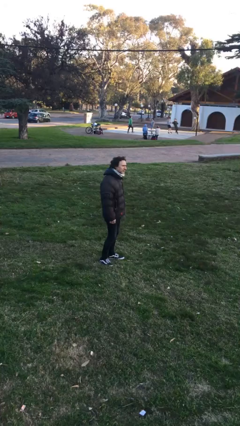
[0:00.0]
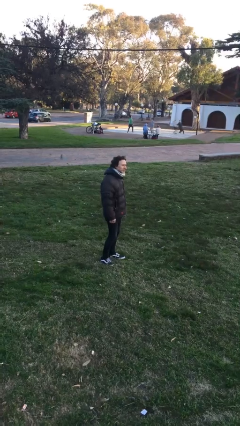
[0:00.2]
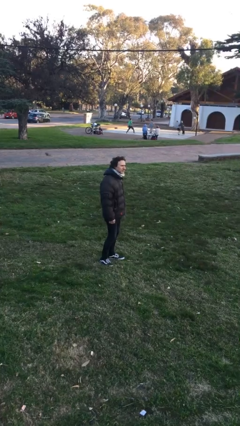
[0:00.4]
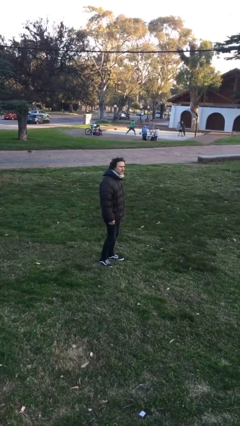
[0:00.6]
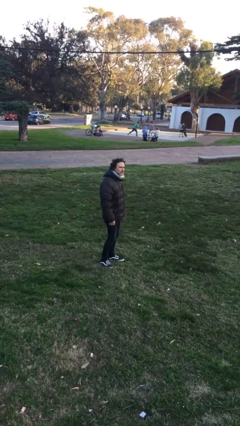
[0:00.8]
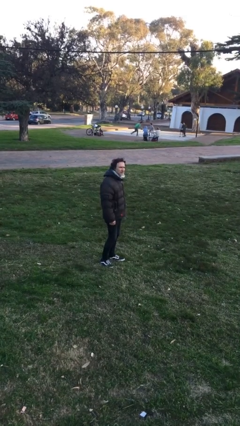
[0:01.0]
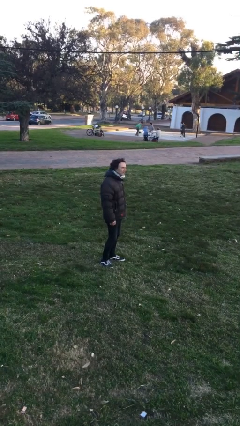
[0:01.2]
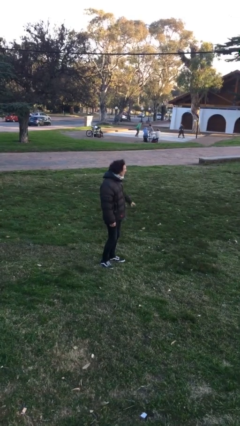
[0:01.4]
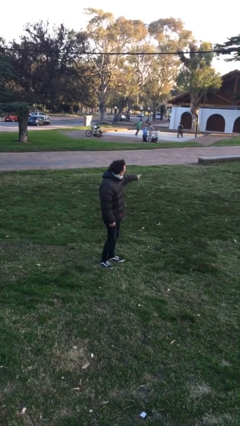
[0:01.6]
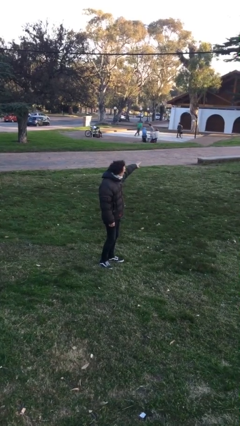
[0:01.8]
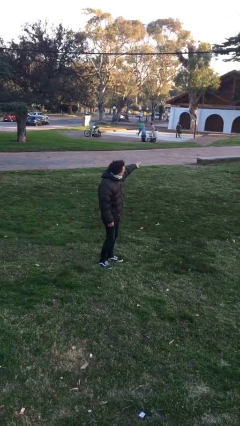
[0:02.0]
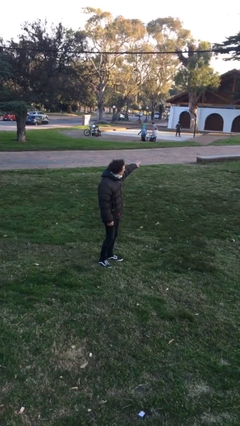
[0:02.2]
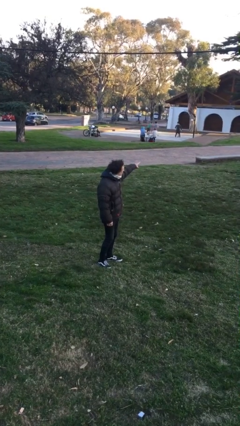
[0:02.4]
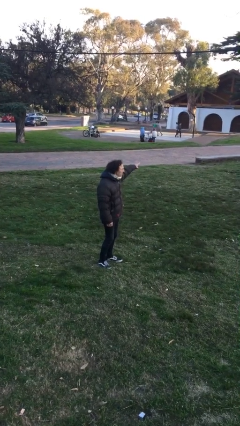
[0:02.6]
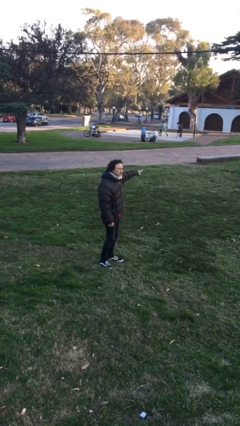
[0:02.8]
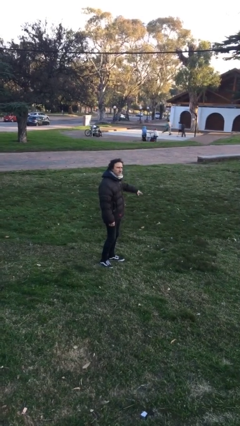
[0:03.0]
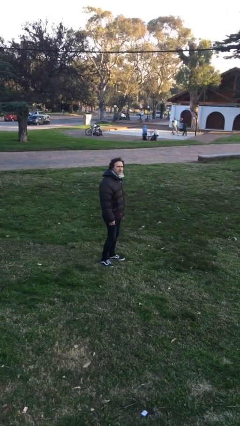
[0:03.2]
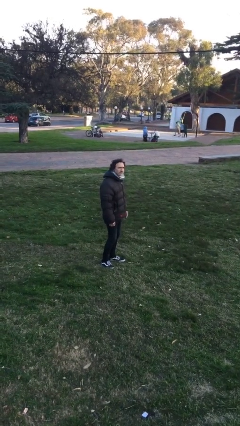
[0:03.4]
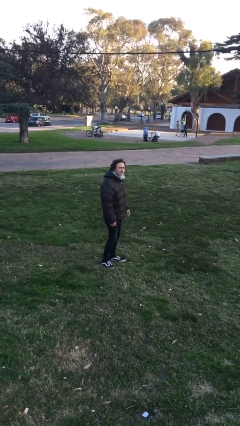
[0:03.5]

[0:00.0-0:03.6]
person points at person

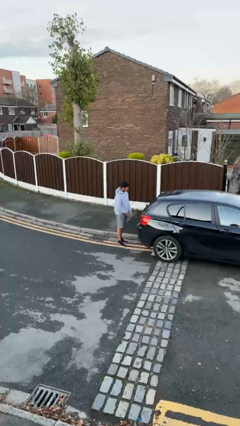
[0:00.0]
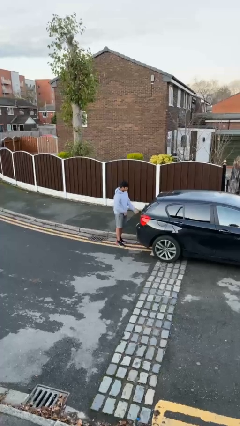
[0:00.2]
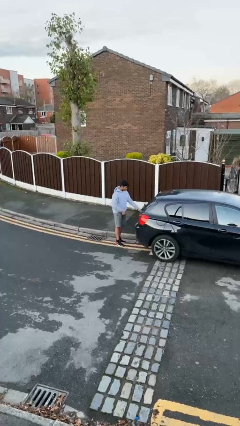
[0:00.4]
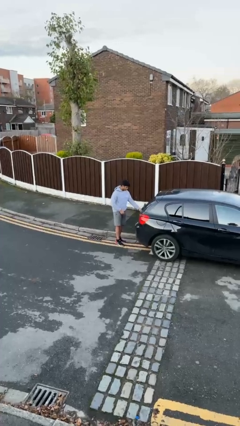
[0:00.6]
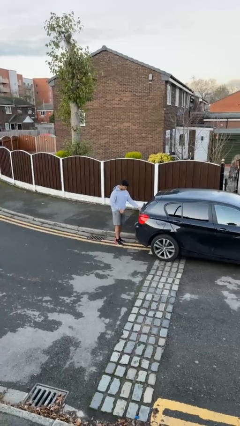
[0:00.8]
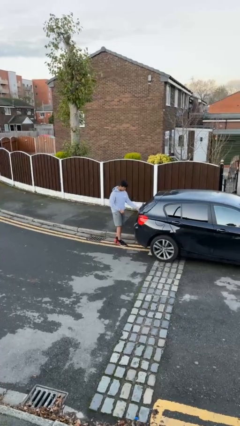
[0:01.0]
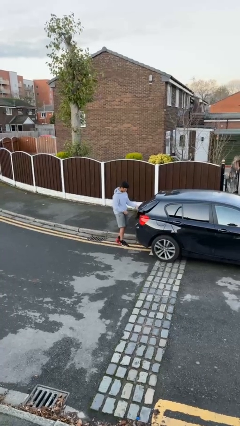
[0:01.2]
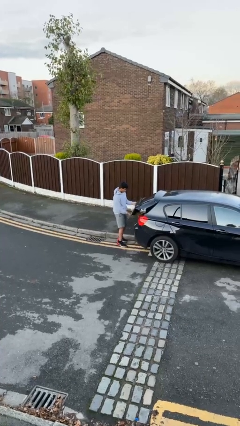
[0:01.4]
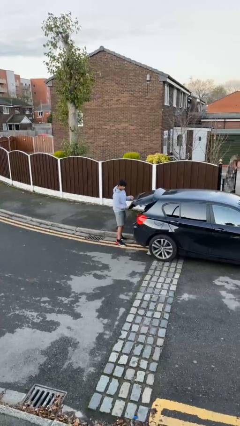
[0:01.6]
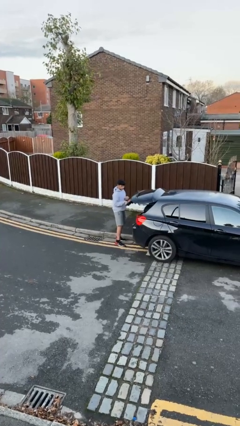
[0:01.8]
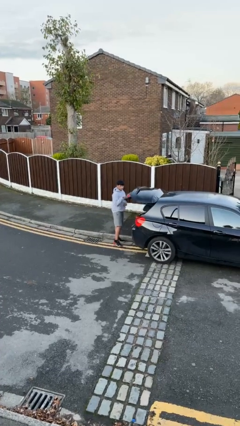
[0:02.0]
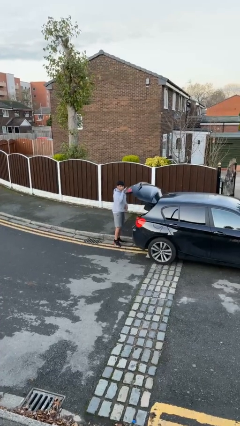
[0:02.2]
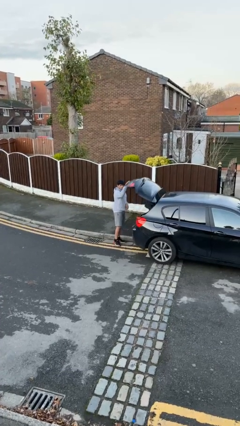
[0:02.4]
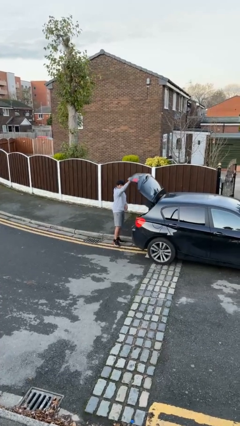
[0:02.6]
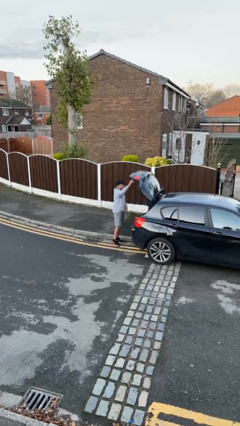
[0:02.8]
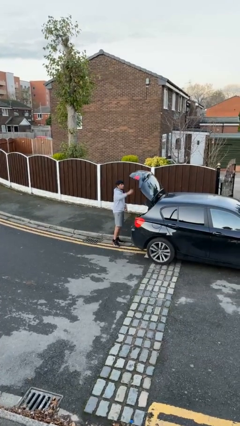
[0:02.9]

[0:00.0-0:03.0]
person opens car trunk

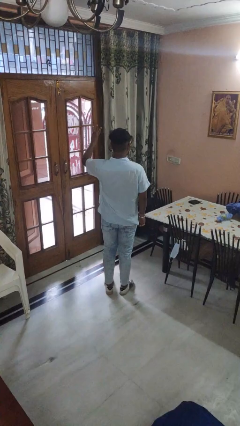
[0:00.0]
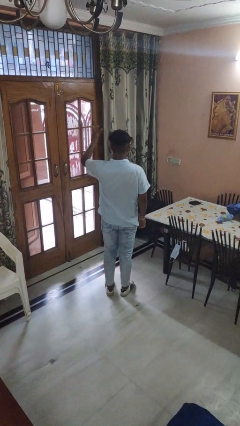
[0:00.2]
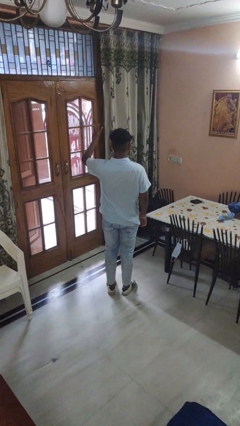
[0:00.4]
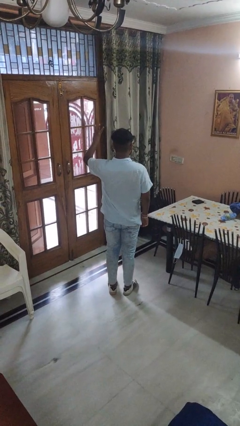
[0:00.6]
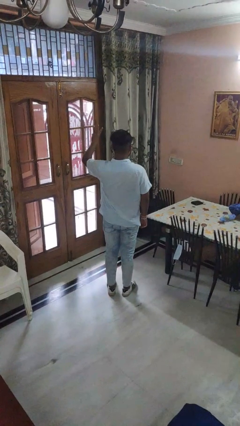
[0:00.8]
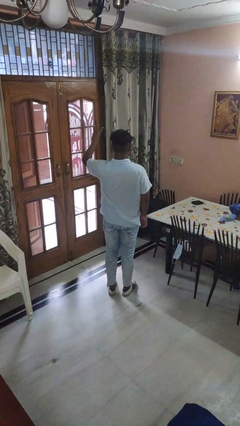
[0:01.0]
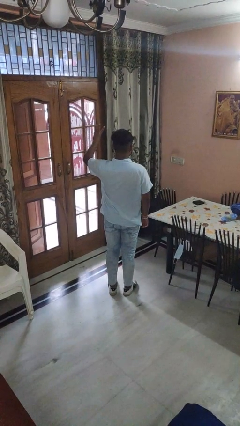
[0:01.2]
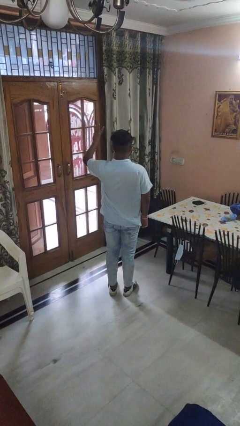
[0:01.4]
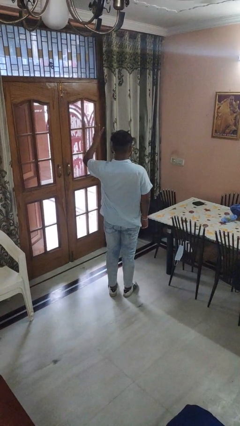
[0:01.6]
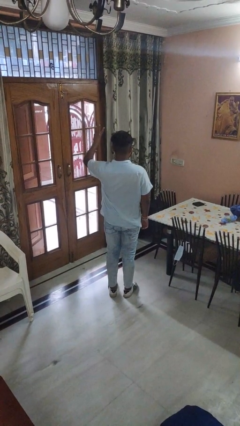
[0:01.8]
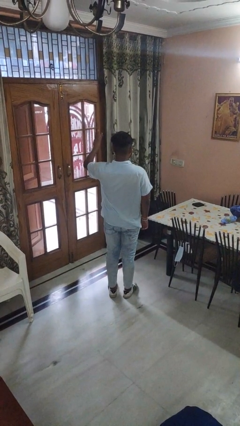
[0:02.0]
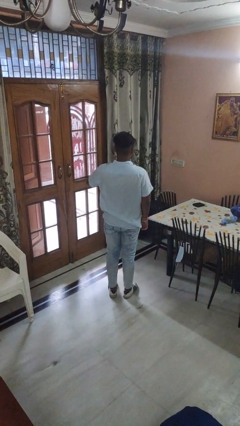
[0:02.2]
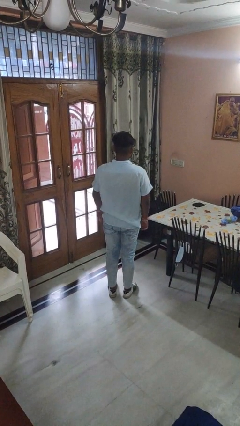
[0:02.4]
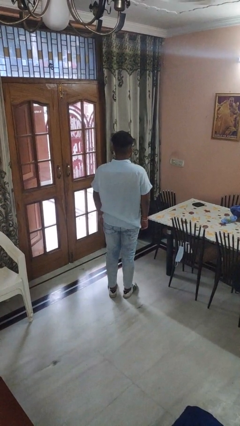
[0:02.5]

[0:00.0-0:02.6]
person gestures number three

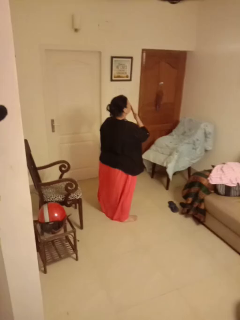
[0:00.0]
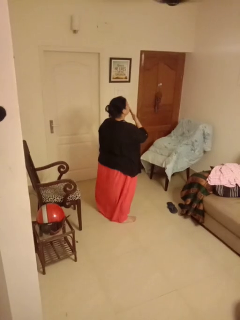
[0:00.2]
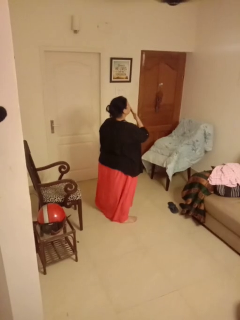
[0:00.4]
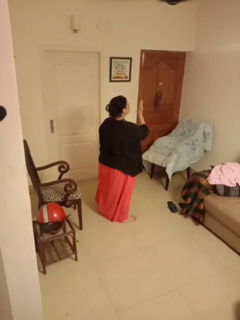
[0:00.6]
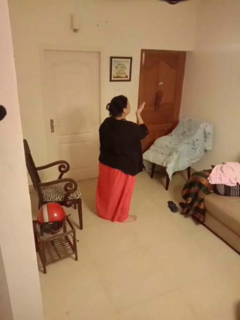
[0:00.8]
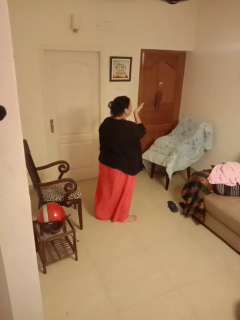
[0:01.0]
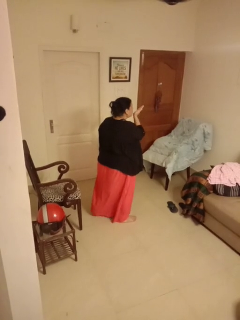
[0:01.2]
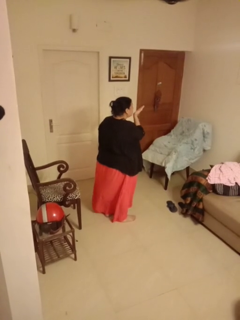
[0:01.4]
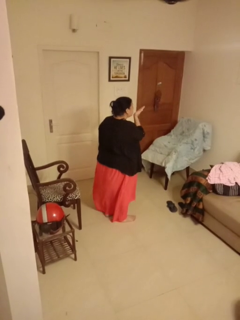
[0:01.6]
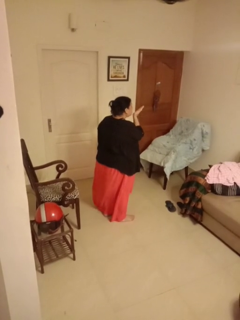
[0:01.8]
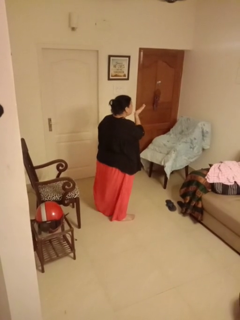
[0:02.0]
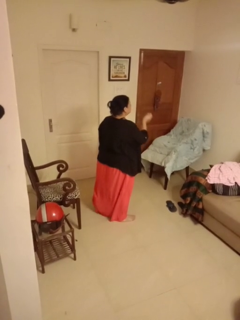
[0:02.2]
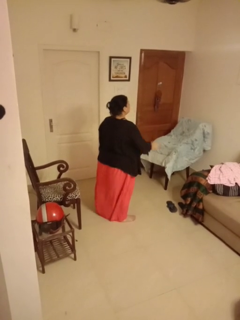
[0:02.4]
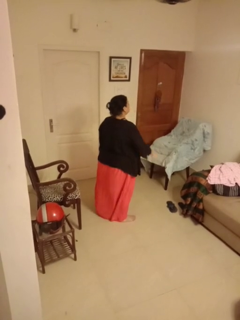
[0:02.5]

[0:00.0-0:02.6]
person gestures blow kiss

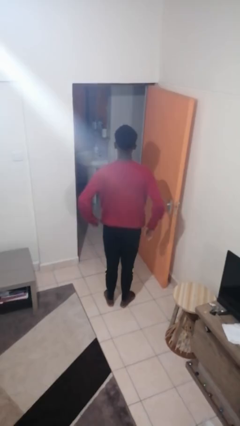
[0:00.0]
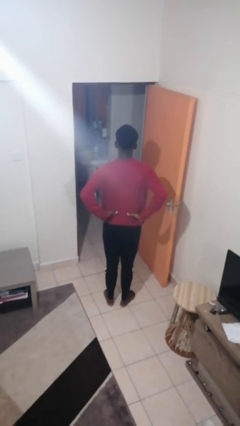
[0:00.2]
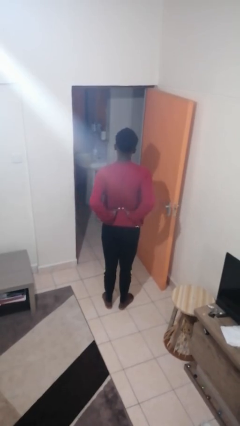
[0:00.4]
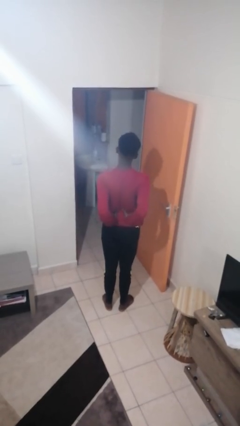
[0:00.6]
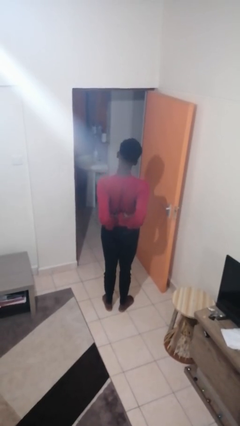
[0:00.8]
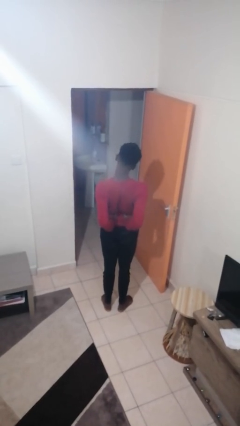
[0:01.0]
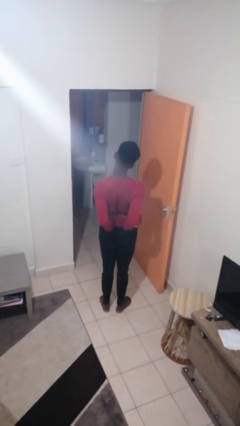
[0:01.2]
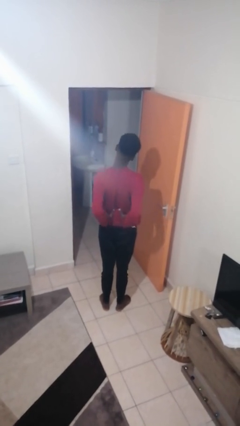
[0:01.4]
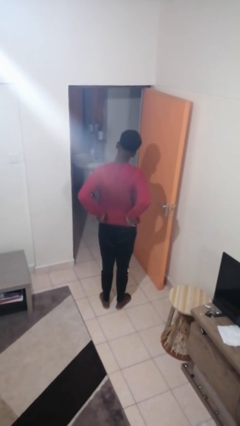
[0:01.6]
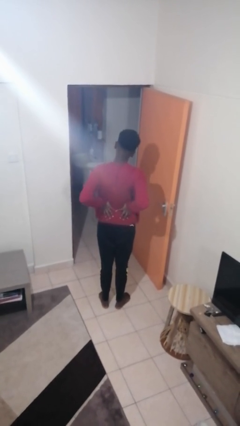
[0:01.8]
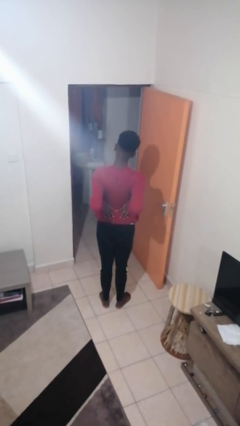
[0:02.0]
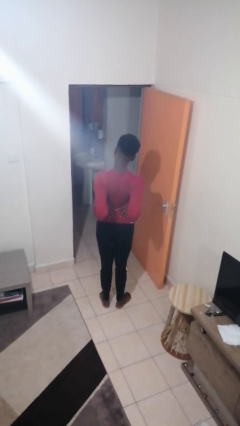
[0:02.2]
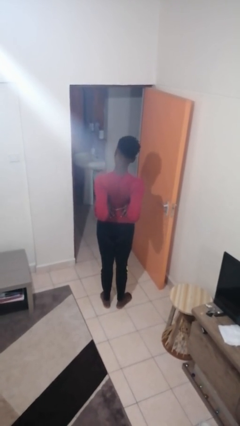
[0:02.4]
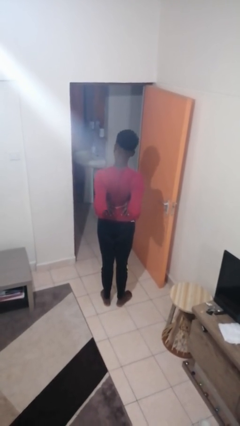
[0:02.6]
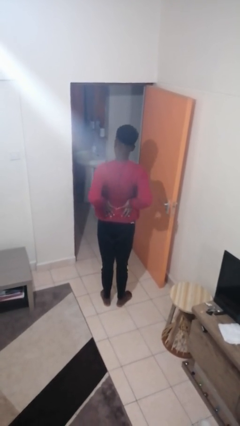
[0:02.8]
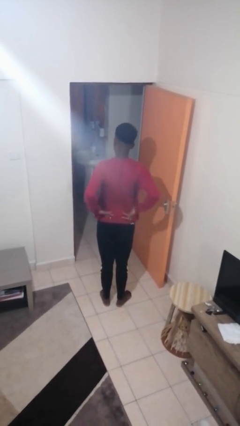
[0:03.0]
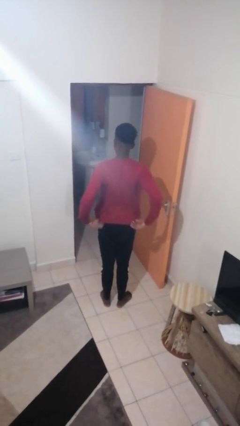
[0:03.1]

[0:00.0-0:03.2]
person stretches back

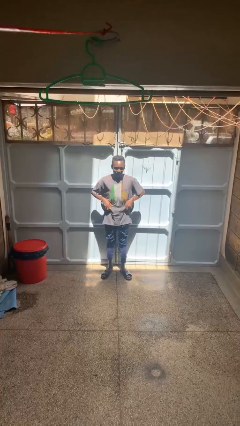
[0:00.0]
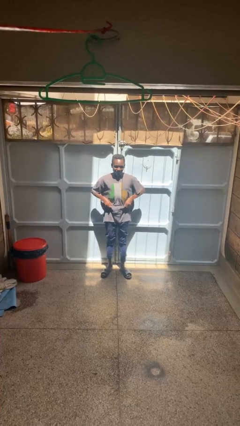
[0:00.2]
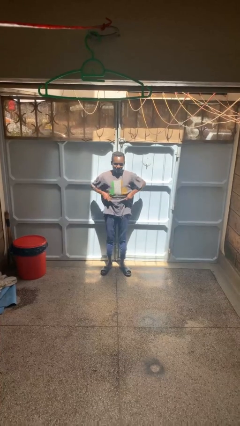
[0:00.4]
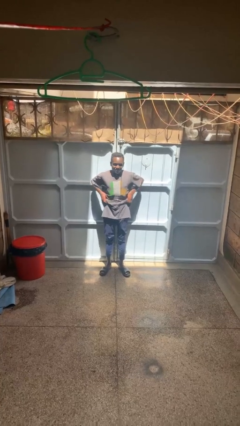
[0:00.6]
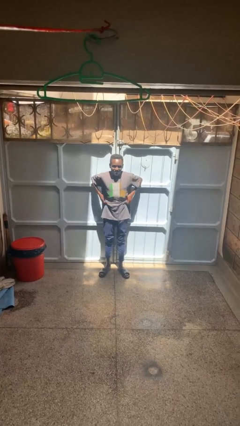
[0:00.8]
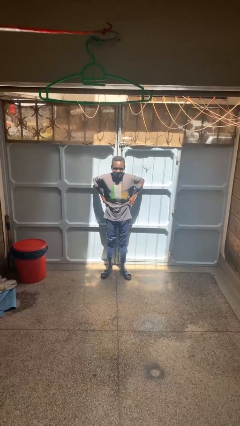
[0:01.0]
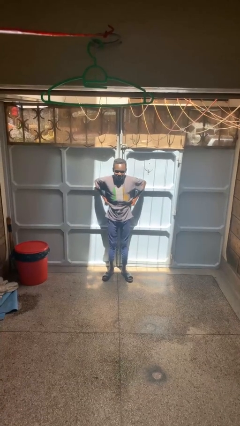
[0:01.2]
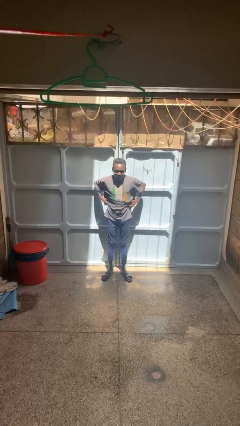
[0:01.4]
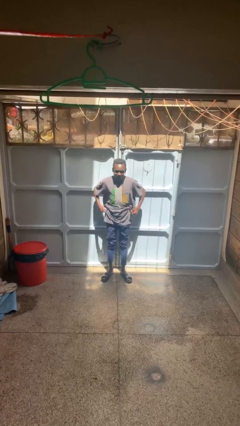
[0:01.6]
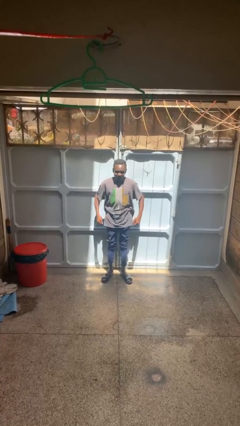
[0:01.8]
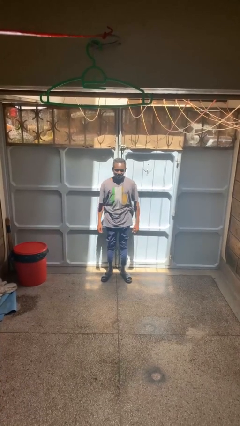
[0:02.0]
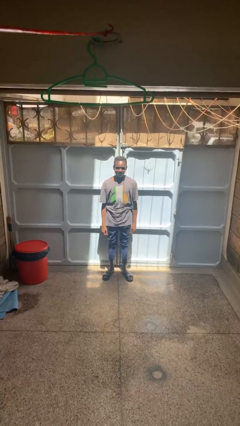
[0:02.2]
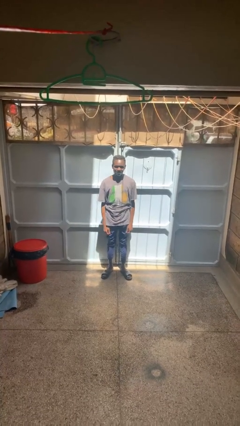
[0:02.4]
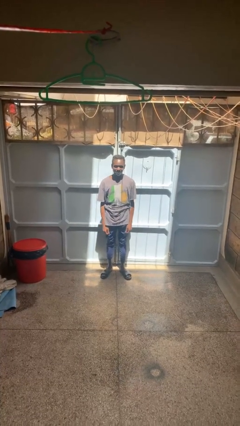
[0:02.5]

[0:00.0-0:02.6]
person hikes up pants

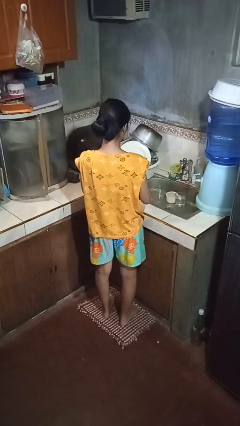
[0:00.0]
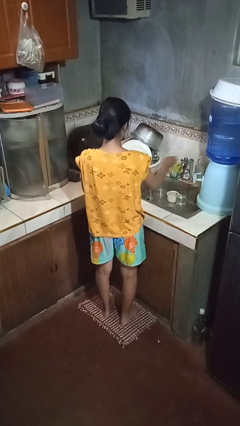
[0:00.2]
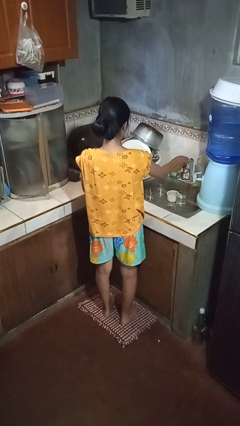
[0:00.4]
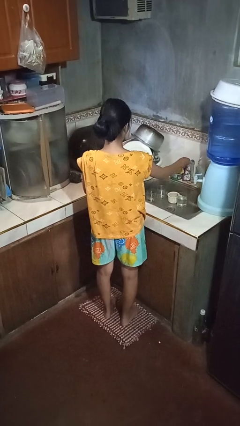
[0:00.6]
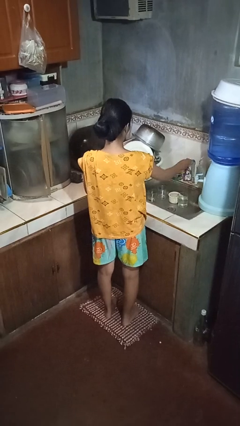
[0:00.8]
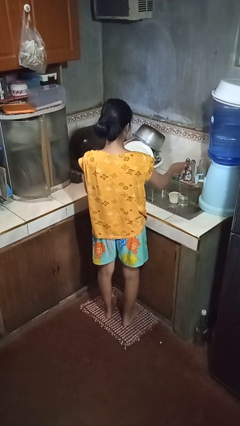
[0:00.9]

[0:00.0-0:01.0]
person turns on faucet
